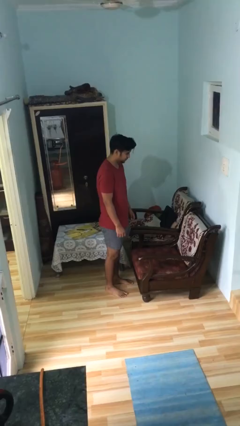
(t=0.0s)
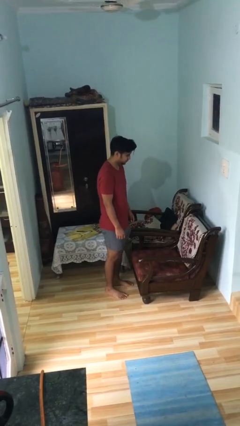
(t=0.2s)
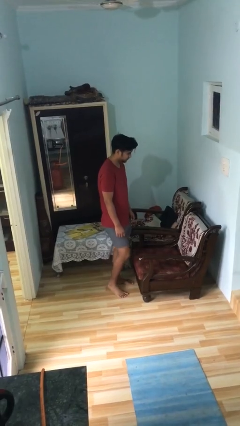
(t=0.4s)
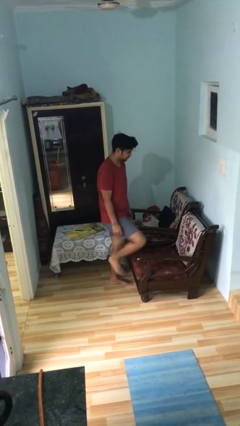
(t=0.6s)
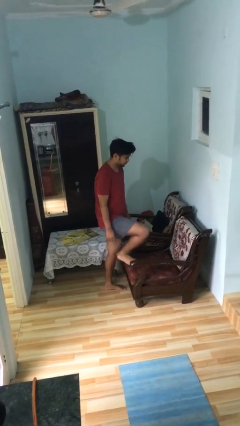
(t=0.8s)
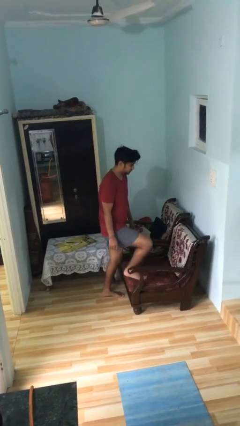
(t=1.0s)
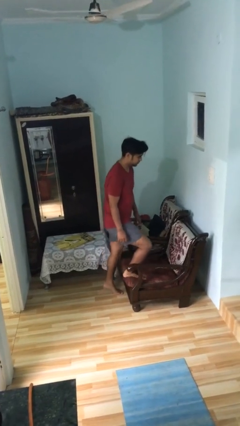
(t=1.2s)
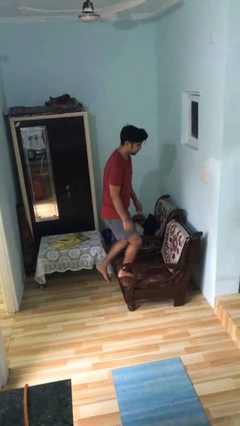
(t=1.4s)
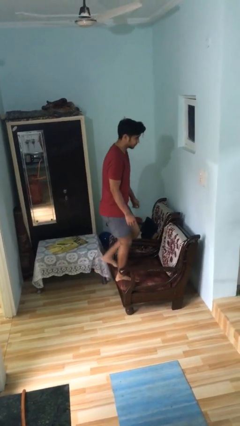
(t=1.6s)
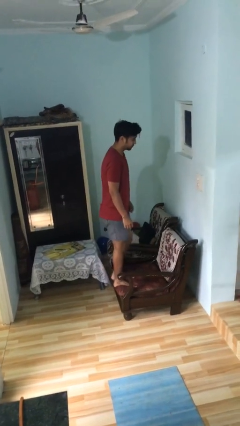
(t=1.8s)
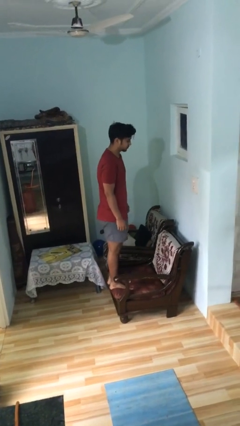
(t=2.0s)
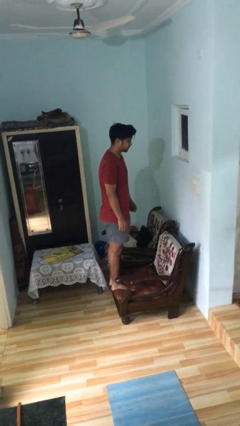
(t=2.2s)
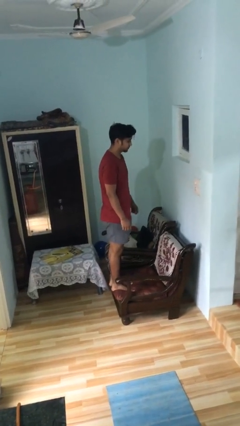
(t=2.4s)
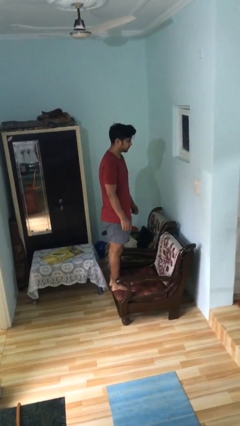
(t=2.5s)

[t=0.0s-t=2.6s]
person climbs on couch

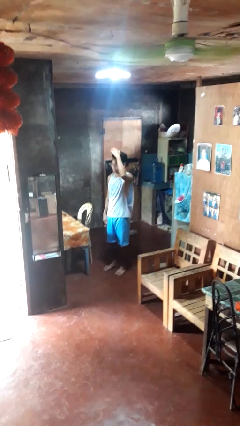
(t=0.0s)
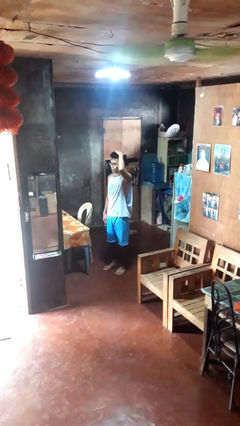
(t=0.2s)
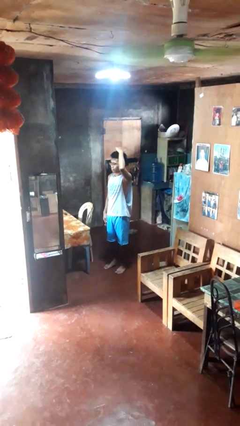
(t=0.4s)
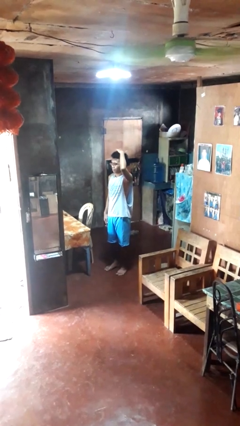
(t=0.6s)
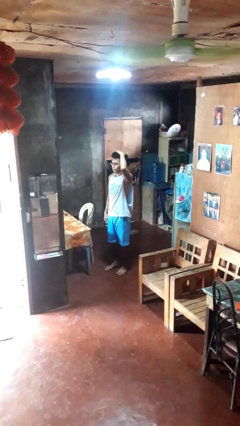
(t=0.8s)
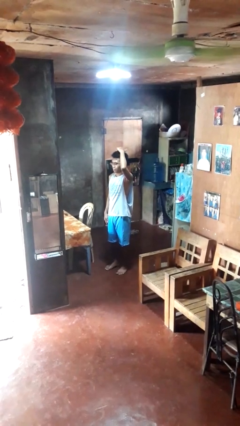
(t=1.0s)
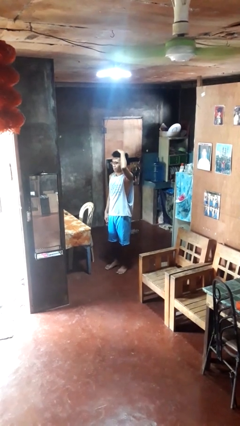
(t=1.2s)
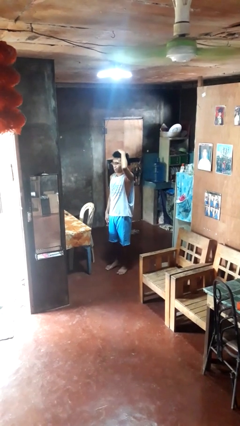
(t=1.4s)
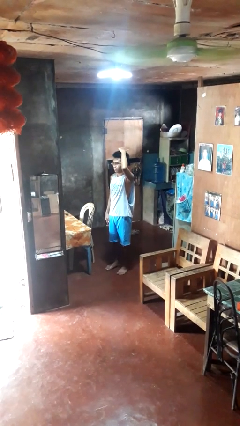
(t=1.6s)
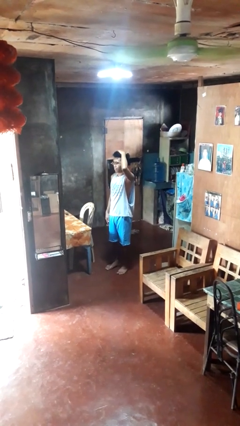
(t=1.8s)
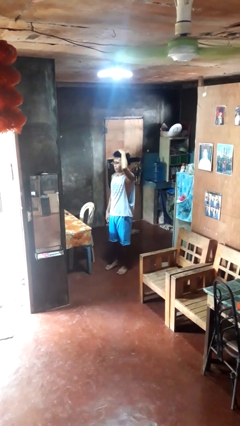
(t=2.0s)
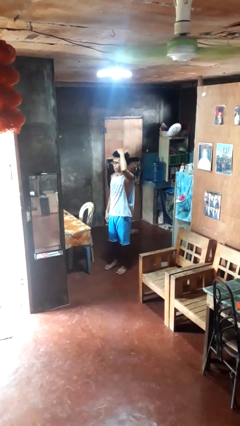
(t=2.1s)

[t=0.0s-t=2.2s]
person pats head

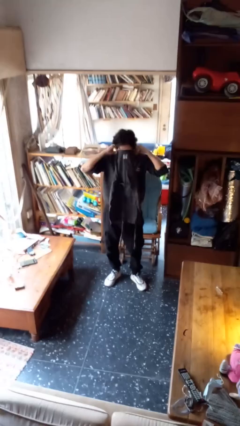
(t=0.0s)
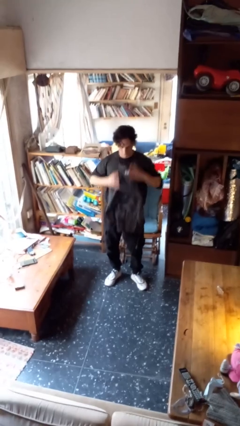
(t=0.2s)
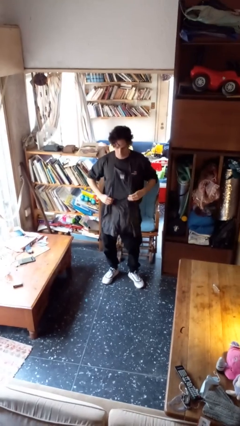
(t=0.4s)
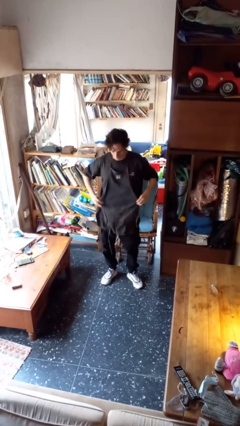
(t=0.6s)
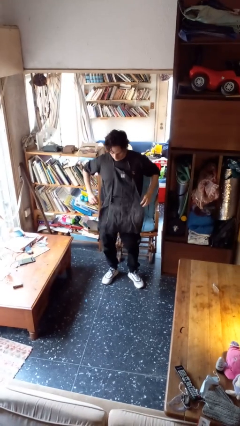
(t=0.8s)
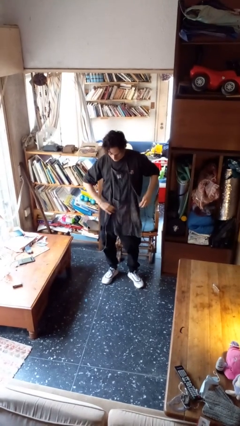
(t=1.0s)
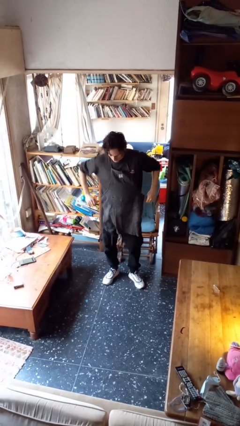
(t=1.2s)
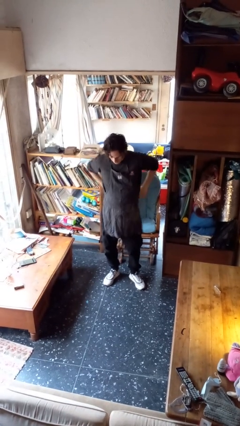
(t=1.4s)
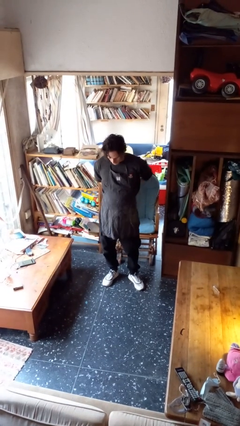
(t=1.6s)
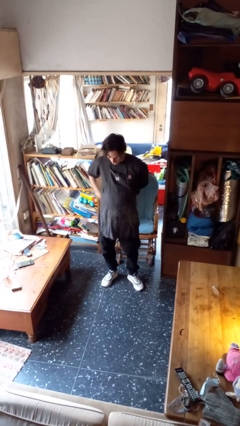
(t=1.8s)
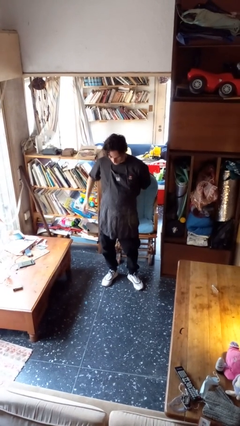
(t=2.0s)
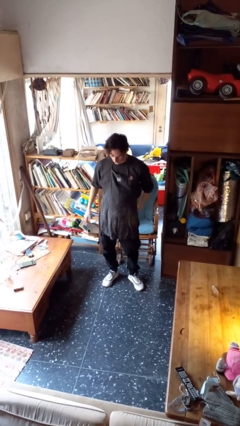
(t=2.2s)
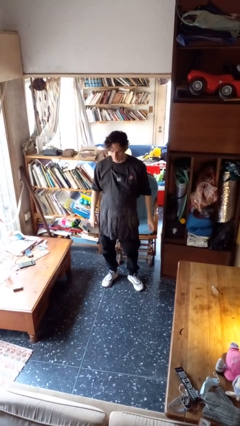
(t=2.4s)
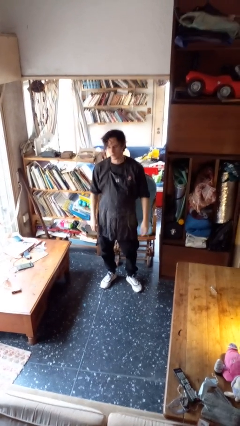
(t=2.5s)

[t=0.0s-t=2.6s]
person puts on apron

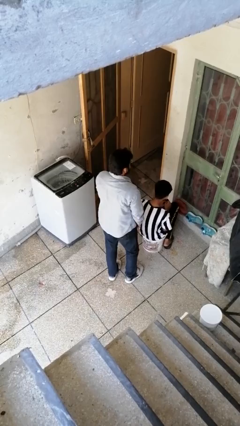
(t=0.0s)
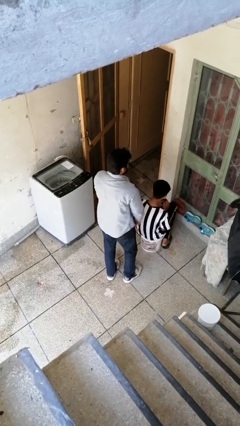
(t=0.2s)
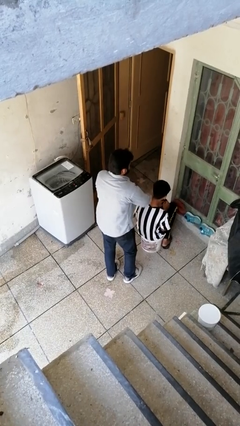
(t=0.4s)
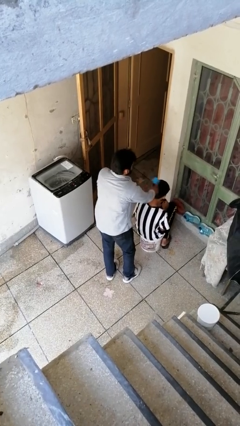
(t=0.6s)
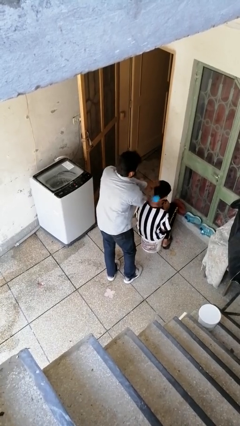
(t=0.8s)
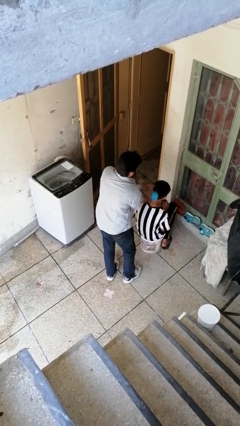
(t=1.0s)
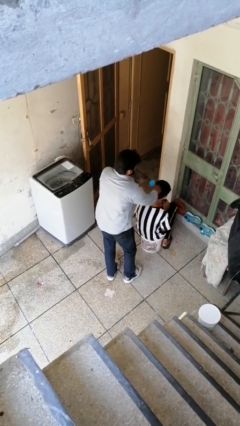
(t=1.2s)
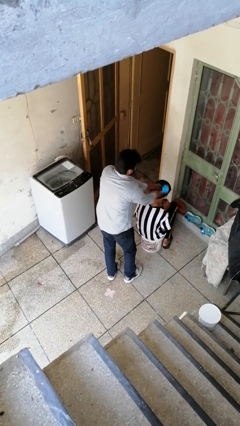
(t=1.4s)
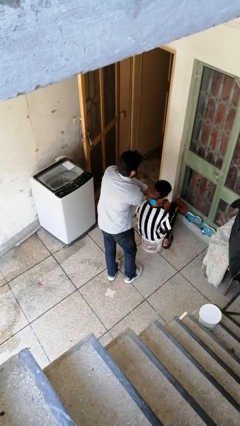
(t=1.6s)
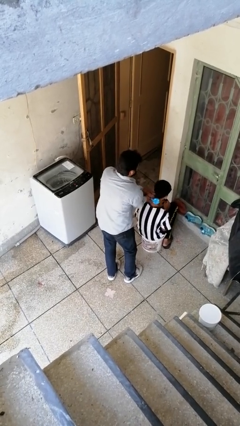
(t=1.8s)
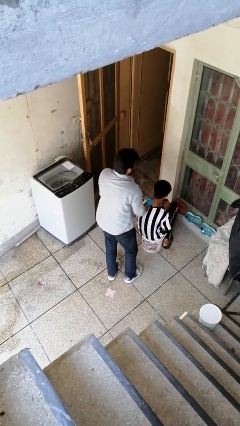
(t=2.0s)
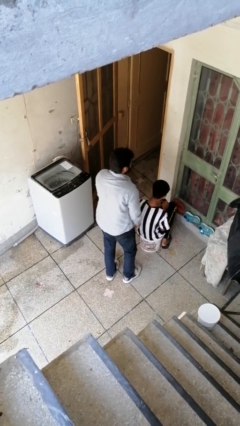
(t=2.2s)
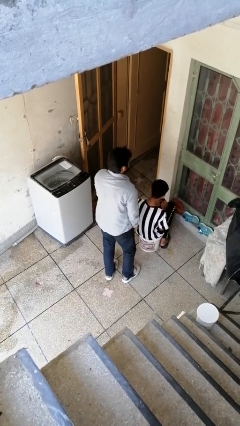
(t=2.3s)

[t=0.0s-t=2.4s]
person brushes hair of person

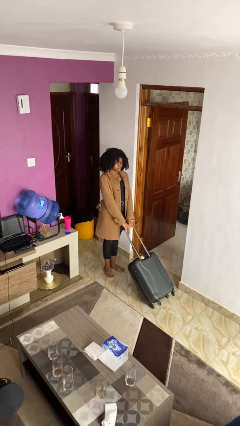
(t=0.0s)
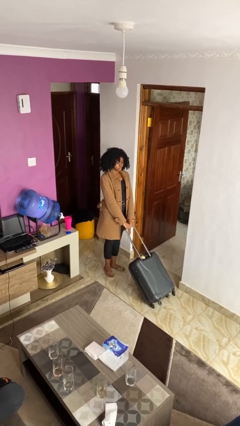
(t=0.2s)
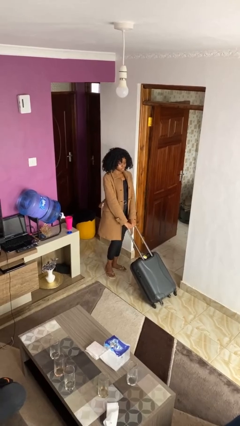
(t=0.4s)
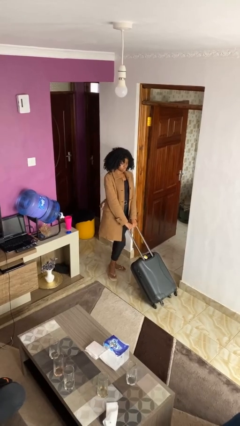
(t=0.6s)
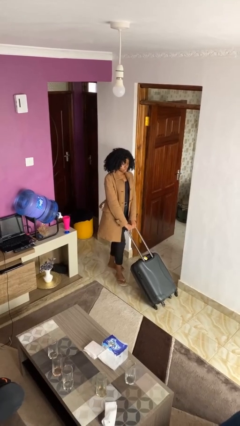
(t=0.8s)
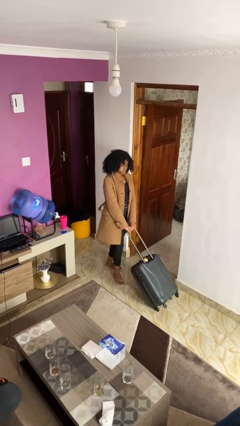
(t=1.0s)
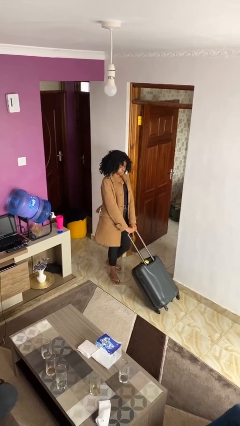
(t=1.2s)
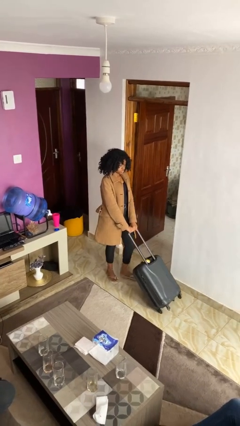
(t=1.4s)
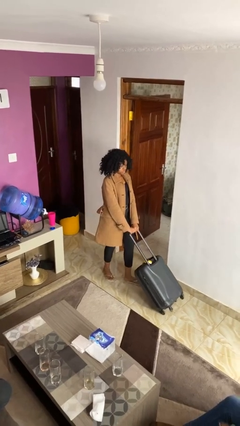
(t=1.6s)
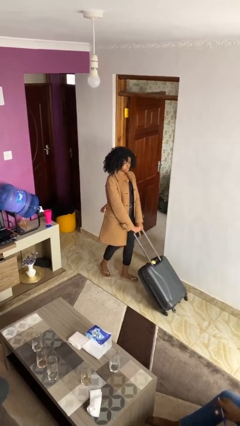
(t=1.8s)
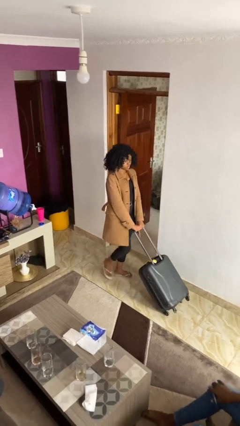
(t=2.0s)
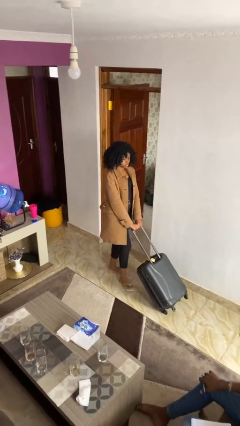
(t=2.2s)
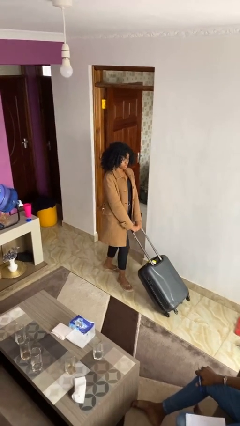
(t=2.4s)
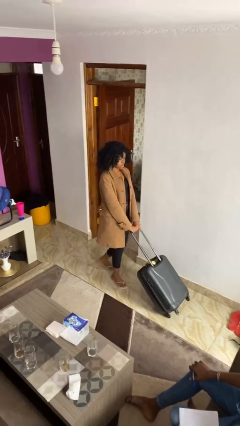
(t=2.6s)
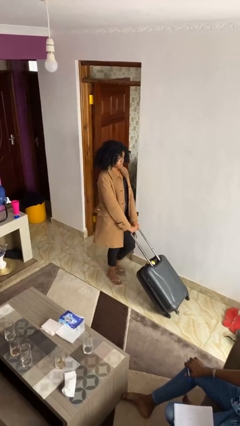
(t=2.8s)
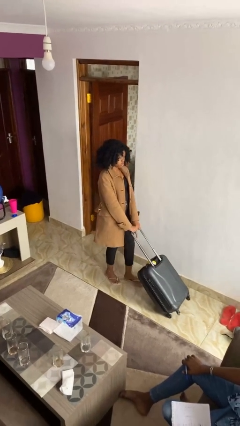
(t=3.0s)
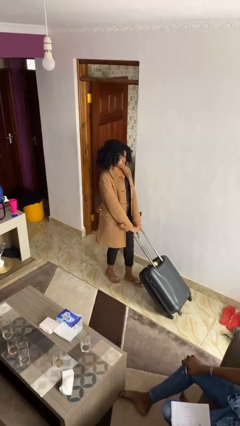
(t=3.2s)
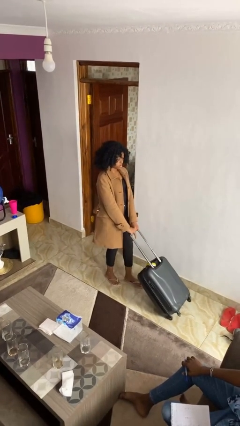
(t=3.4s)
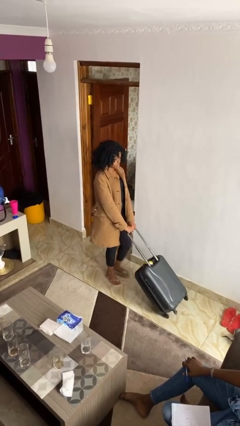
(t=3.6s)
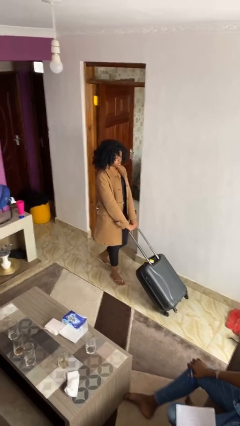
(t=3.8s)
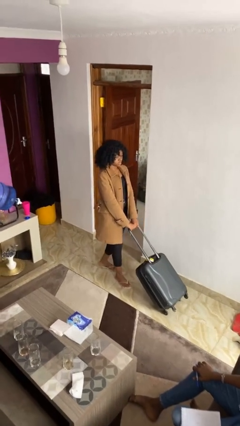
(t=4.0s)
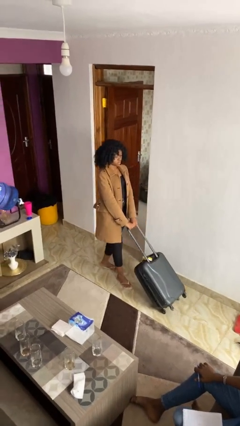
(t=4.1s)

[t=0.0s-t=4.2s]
person pushes wheeled cart

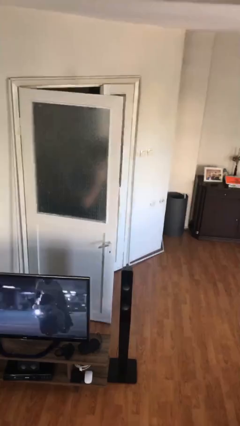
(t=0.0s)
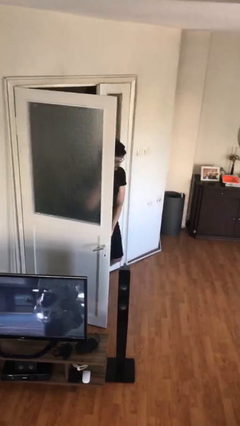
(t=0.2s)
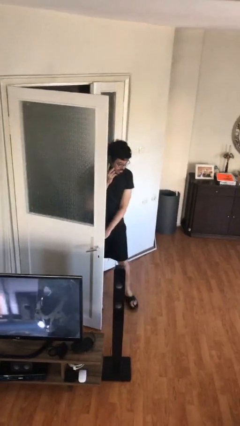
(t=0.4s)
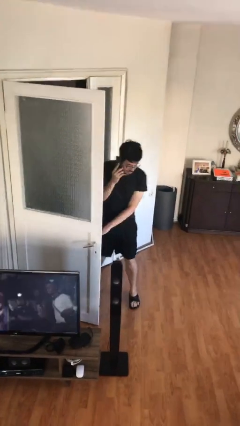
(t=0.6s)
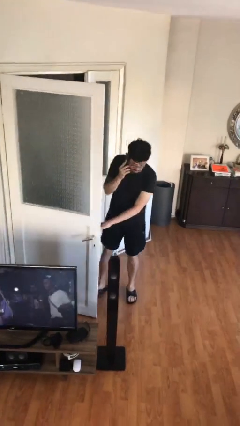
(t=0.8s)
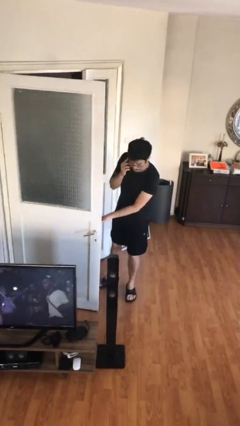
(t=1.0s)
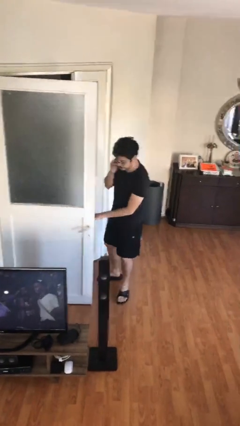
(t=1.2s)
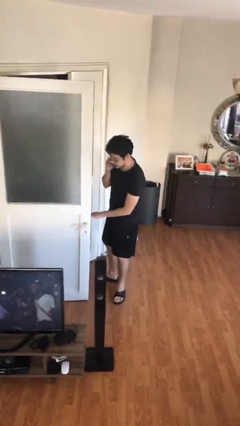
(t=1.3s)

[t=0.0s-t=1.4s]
person enters scene through structure

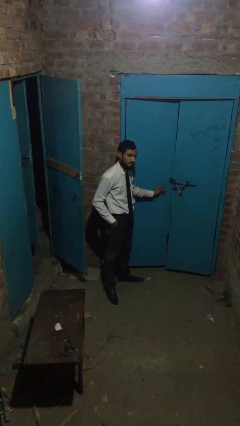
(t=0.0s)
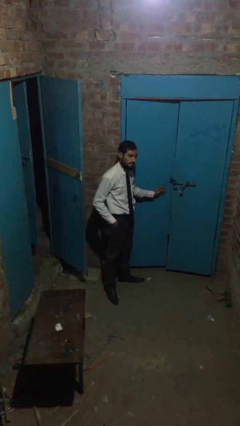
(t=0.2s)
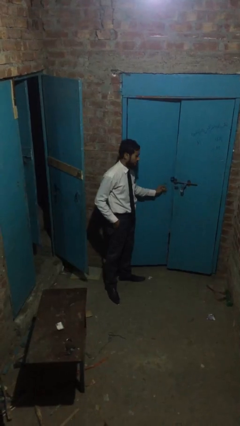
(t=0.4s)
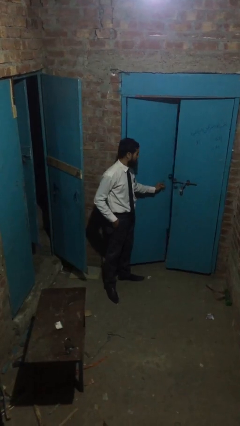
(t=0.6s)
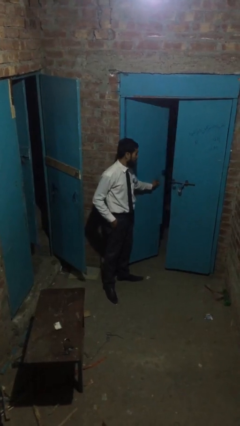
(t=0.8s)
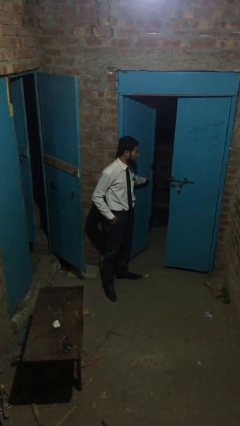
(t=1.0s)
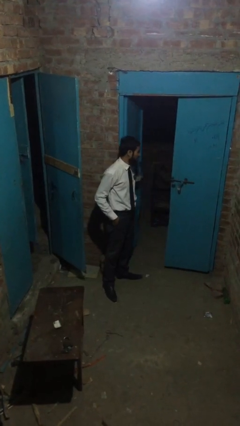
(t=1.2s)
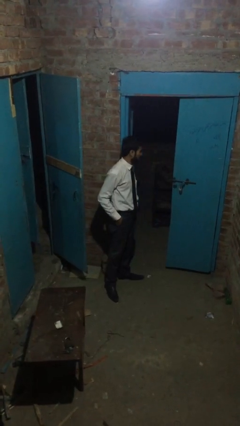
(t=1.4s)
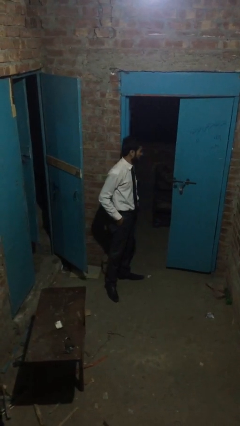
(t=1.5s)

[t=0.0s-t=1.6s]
person opens facility door

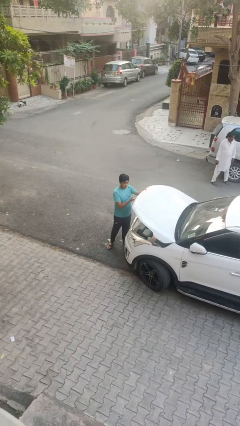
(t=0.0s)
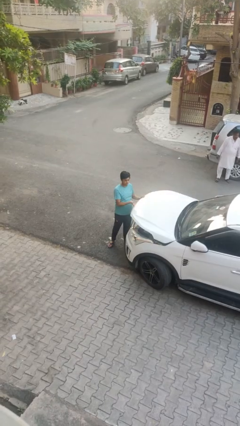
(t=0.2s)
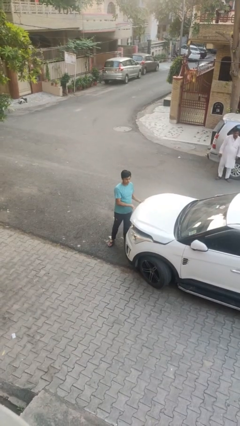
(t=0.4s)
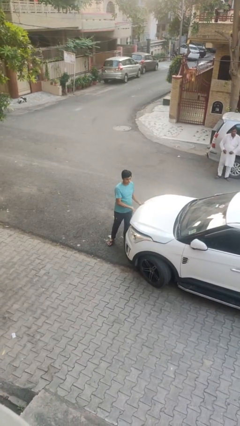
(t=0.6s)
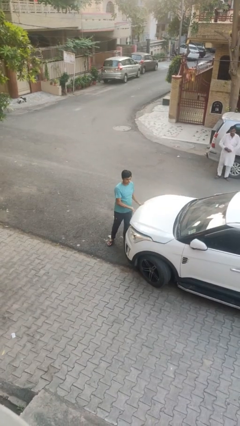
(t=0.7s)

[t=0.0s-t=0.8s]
person closes car hood
